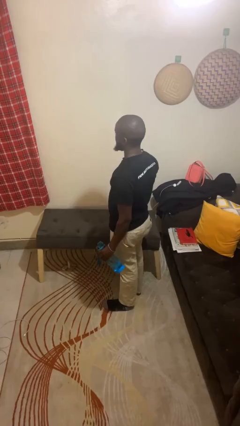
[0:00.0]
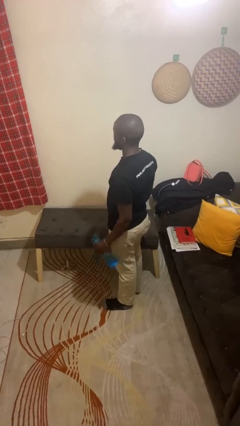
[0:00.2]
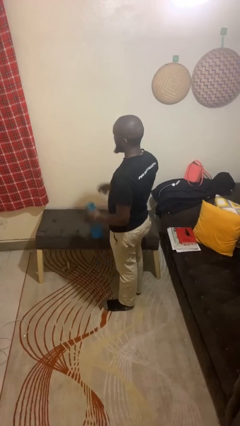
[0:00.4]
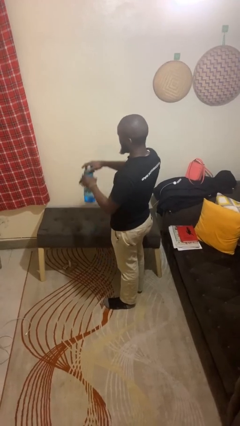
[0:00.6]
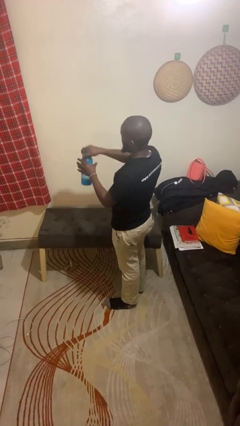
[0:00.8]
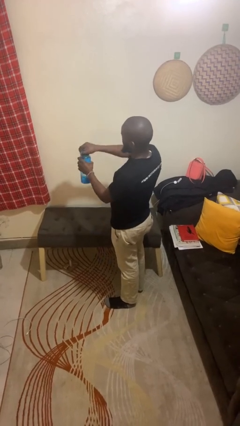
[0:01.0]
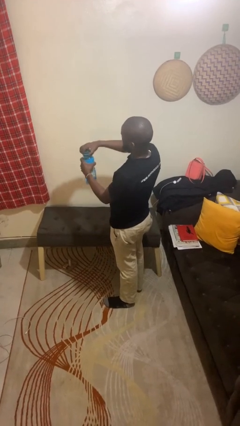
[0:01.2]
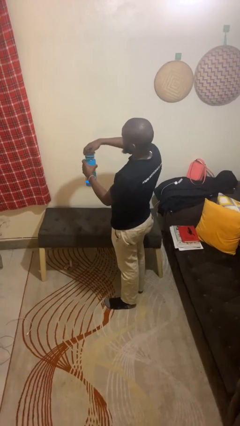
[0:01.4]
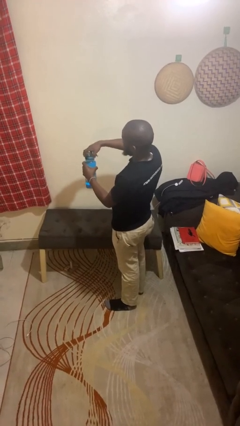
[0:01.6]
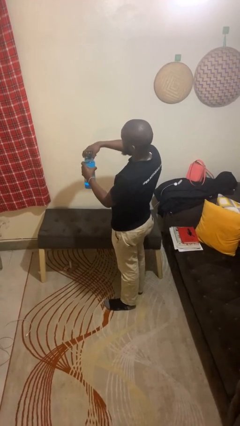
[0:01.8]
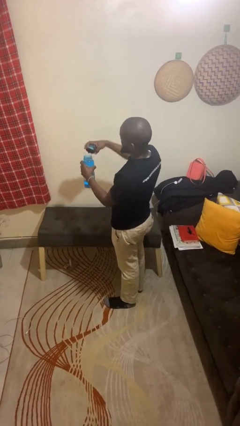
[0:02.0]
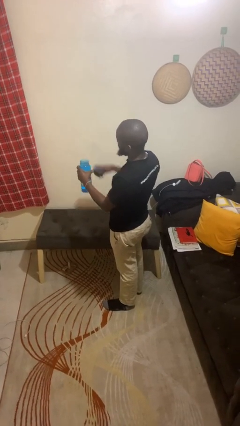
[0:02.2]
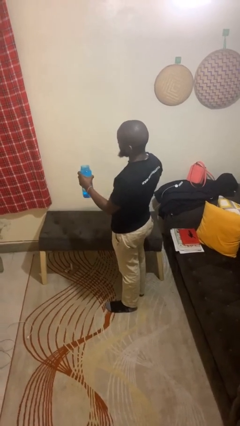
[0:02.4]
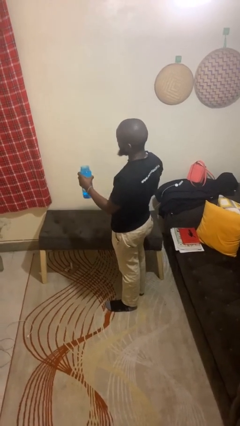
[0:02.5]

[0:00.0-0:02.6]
person opens jar

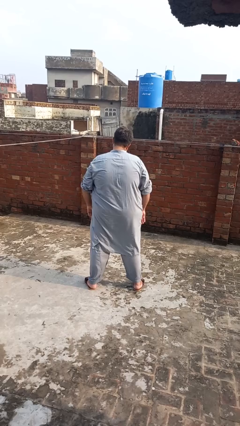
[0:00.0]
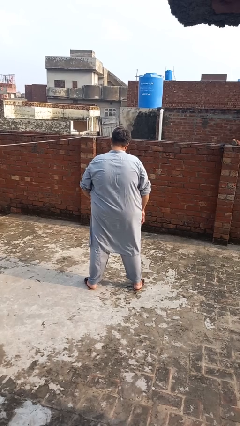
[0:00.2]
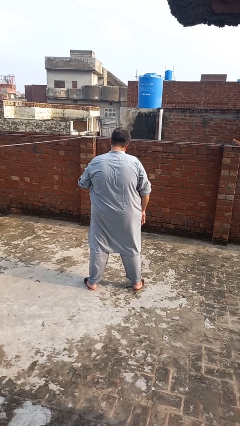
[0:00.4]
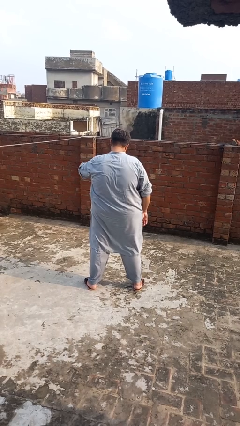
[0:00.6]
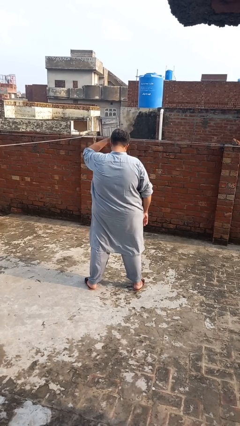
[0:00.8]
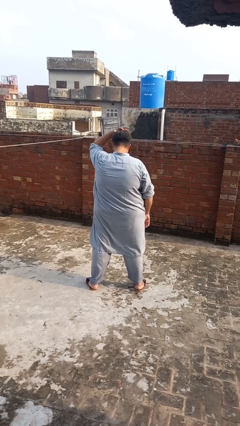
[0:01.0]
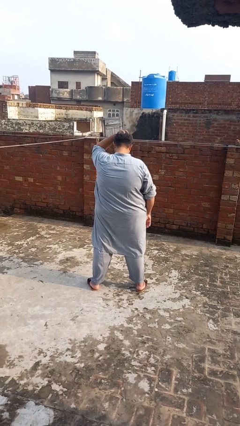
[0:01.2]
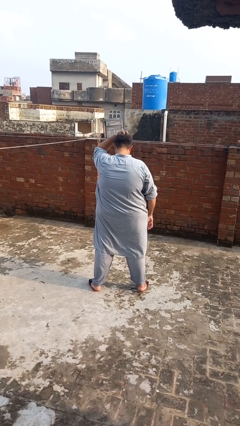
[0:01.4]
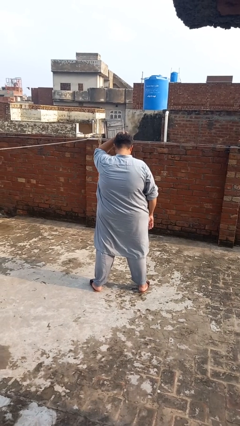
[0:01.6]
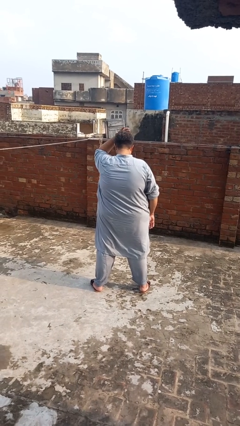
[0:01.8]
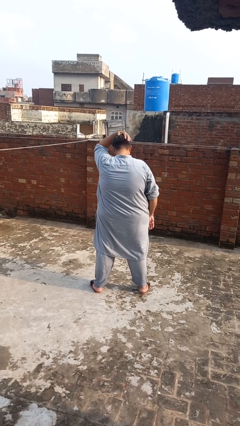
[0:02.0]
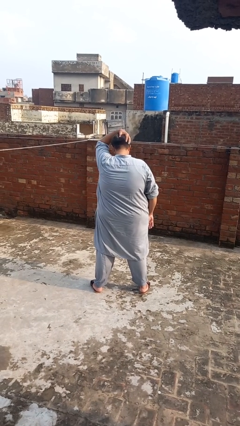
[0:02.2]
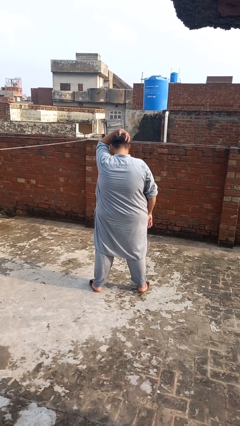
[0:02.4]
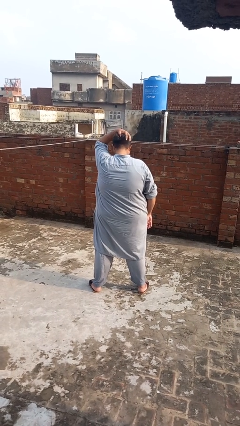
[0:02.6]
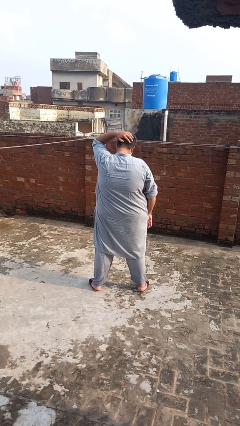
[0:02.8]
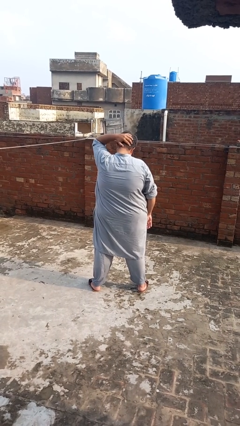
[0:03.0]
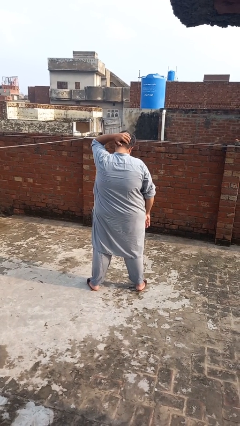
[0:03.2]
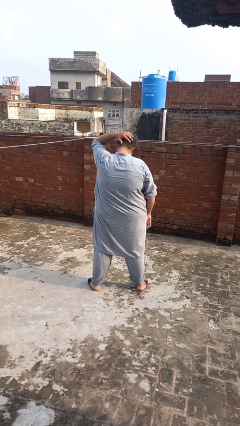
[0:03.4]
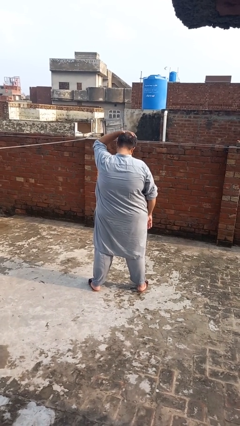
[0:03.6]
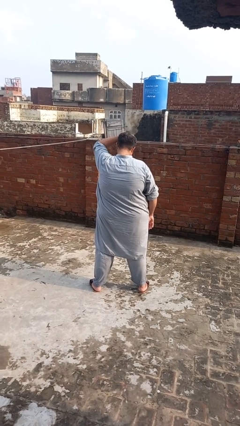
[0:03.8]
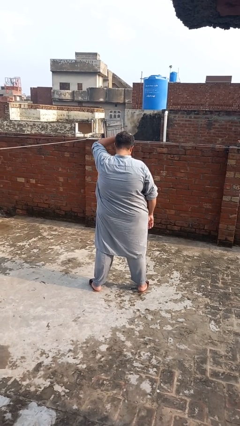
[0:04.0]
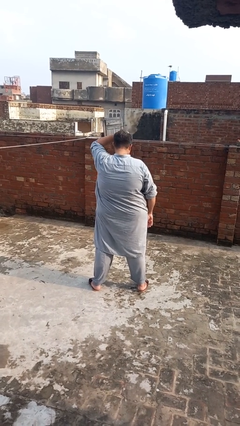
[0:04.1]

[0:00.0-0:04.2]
person pats head

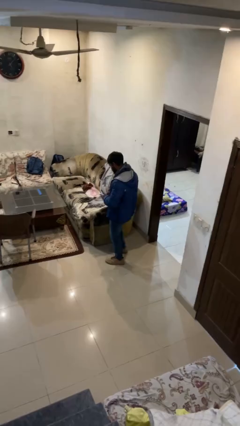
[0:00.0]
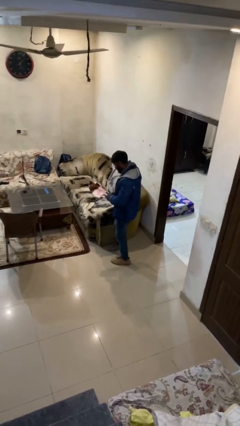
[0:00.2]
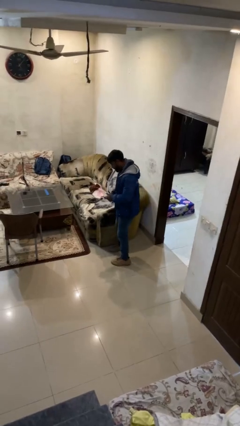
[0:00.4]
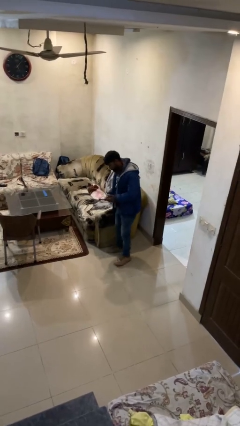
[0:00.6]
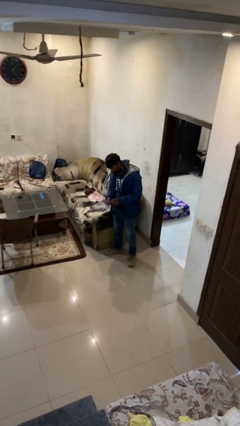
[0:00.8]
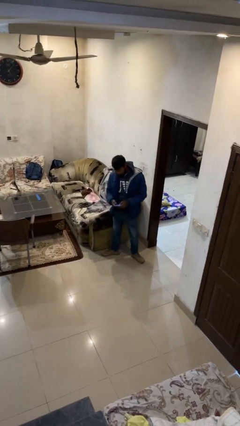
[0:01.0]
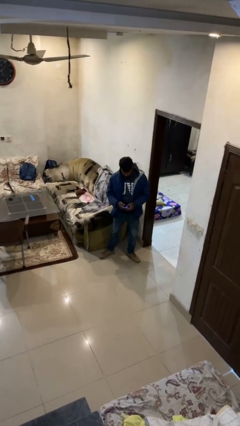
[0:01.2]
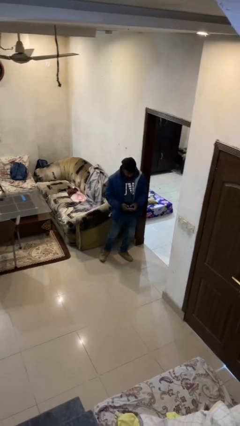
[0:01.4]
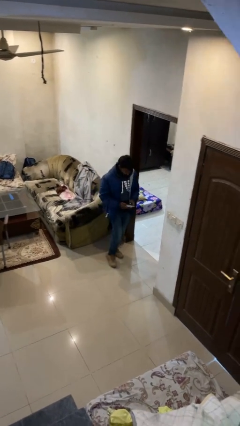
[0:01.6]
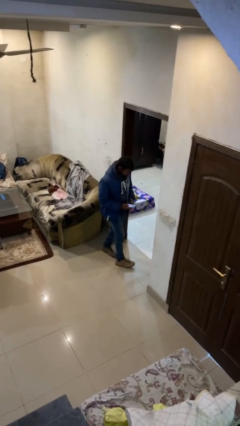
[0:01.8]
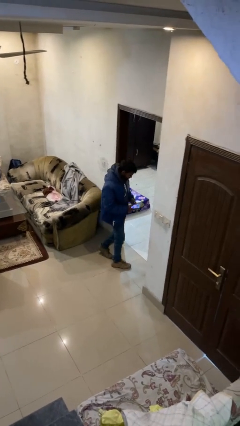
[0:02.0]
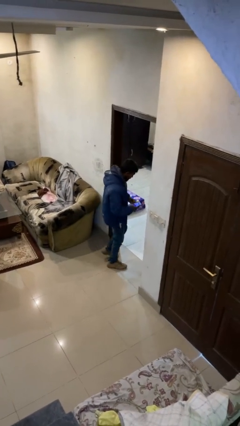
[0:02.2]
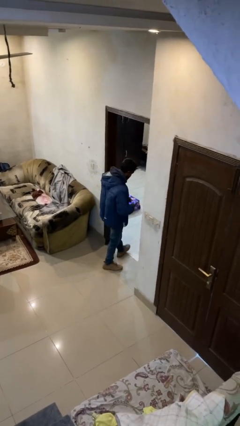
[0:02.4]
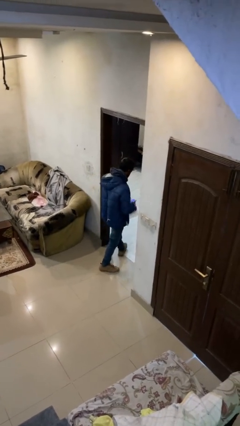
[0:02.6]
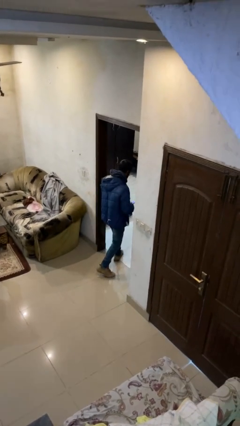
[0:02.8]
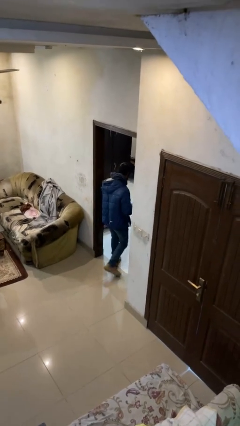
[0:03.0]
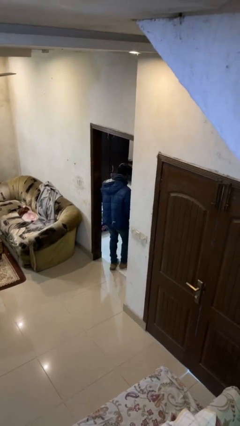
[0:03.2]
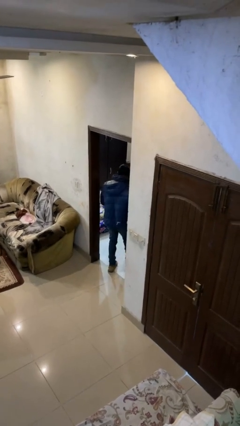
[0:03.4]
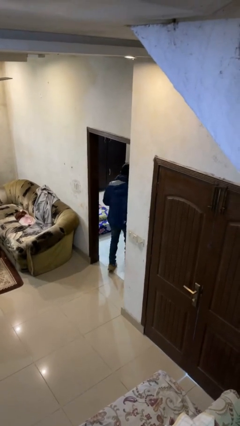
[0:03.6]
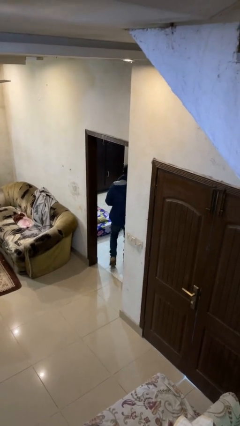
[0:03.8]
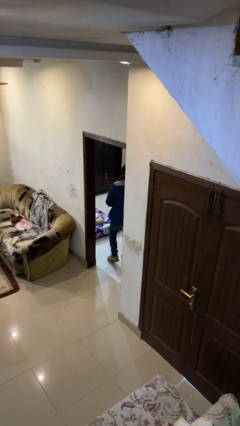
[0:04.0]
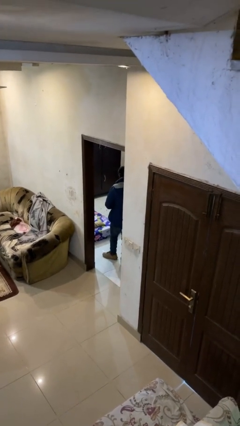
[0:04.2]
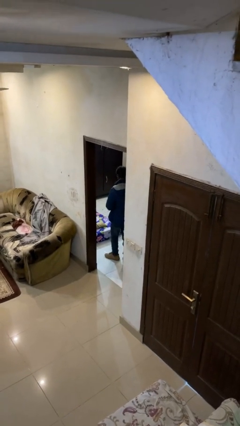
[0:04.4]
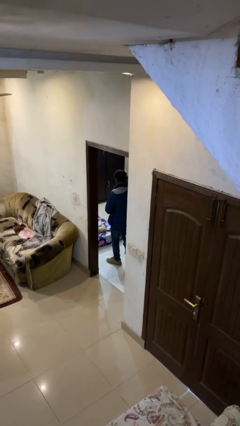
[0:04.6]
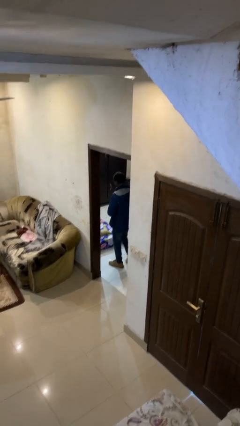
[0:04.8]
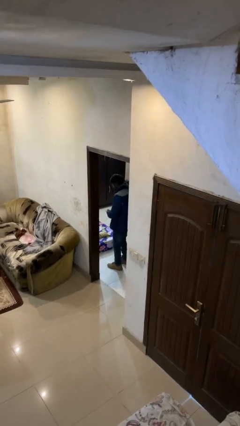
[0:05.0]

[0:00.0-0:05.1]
person exits scene through structure

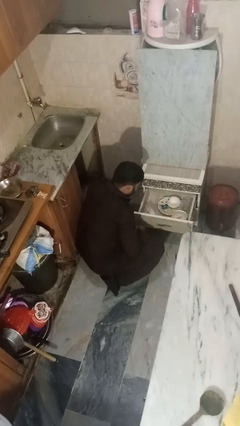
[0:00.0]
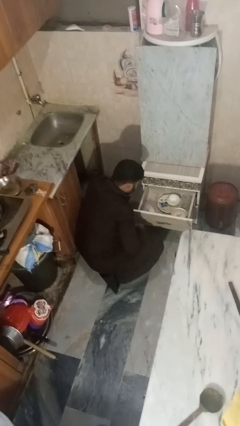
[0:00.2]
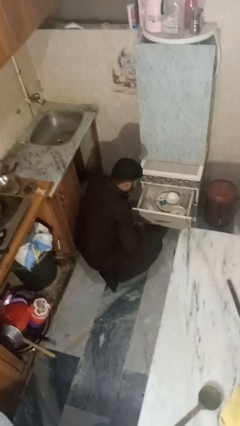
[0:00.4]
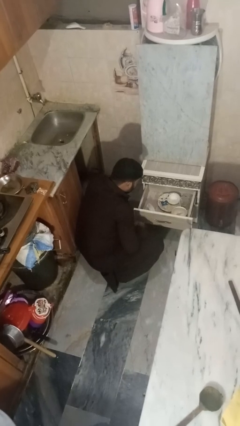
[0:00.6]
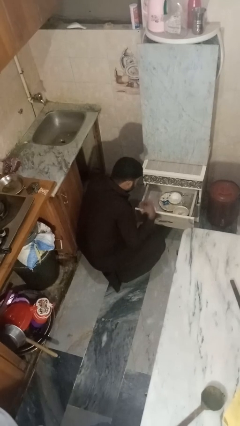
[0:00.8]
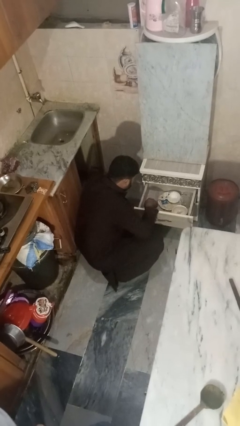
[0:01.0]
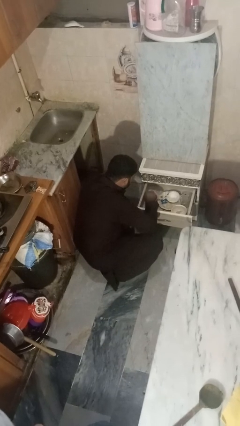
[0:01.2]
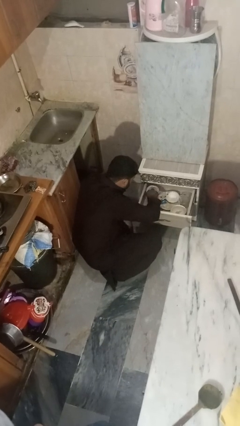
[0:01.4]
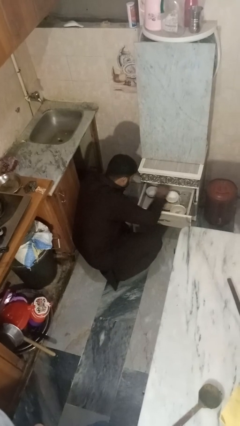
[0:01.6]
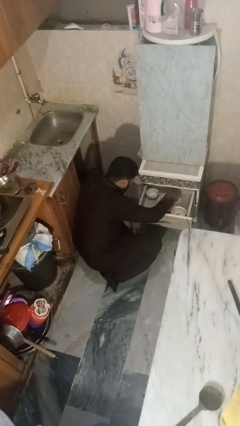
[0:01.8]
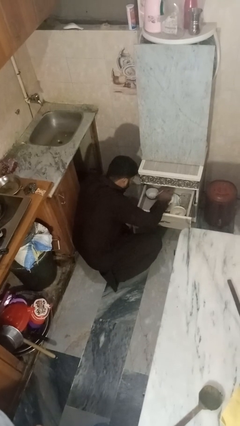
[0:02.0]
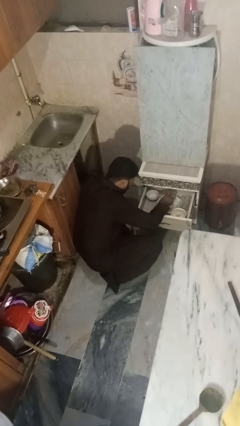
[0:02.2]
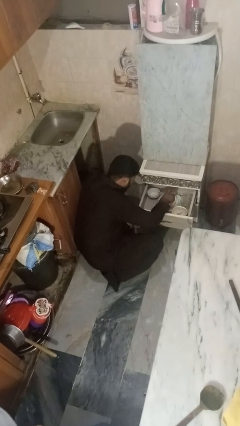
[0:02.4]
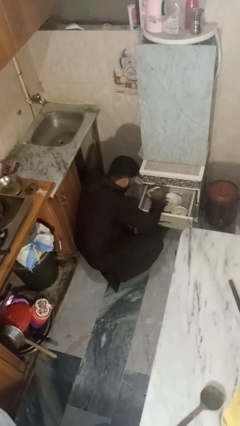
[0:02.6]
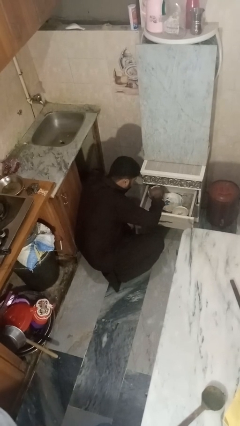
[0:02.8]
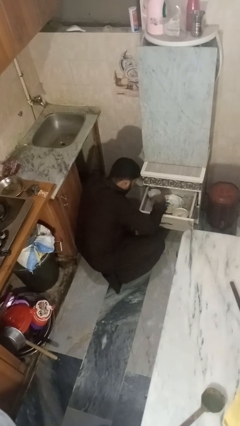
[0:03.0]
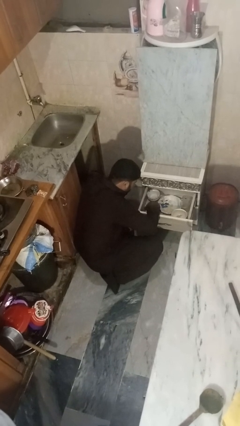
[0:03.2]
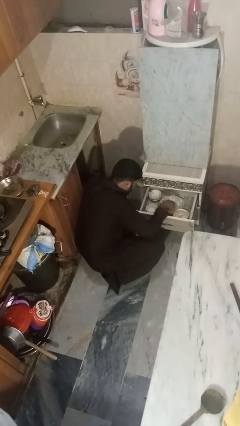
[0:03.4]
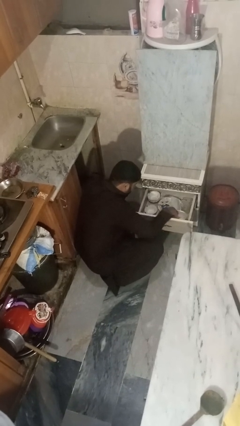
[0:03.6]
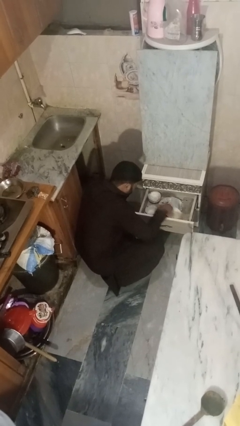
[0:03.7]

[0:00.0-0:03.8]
person searches in kitchen drawer

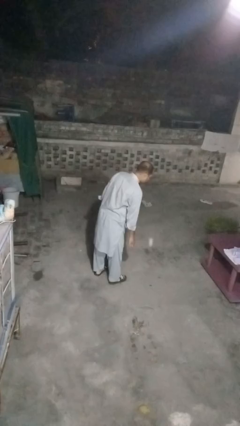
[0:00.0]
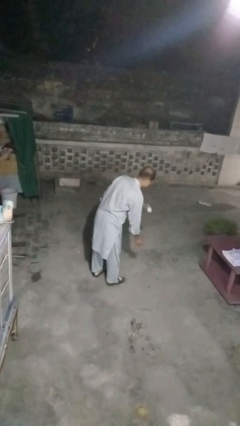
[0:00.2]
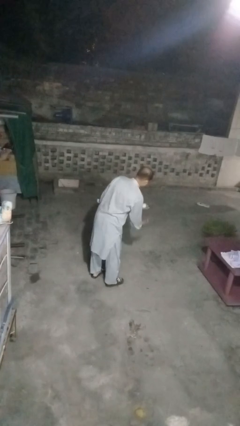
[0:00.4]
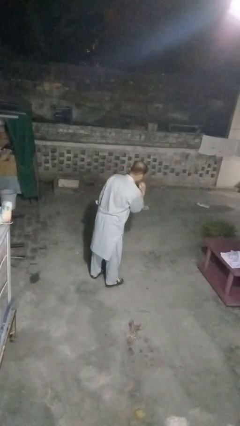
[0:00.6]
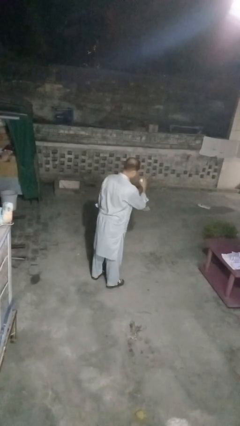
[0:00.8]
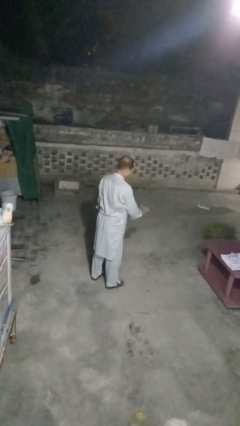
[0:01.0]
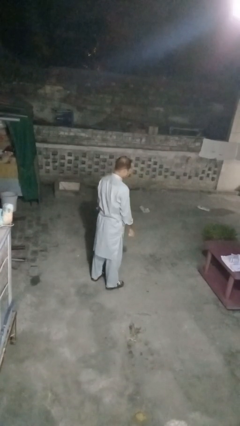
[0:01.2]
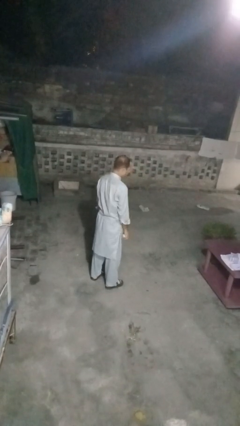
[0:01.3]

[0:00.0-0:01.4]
person bounces ball on floor

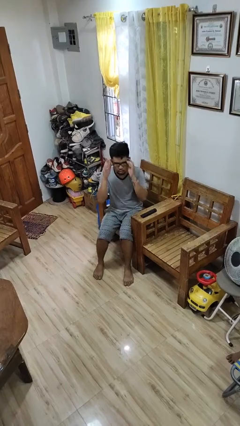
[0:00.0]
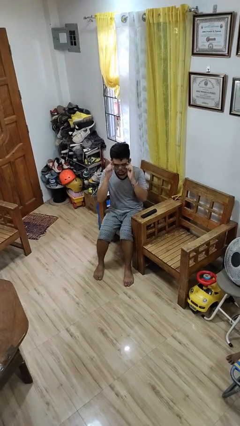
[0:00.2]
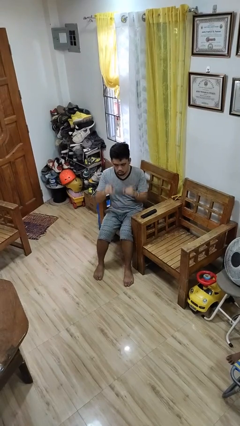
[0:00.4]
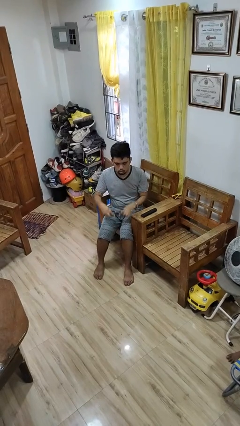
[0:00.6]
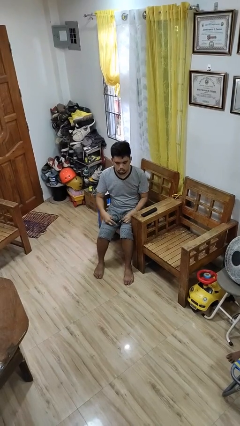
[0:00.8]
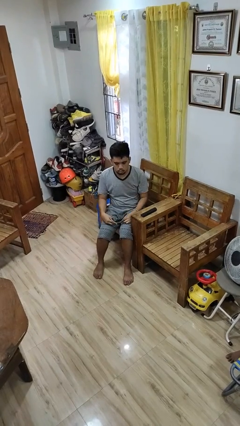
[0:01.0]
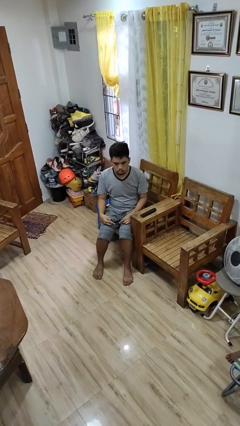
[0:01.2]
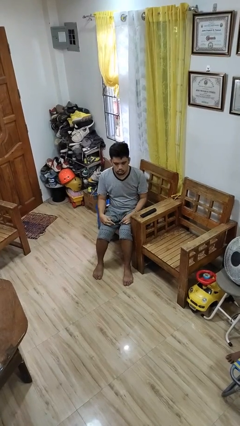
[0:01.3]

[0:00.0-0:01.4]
person takes off glasses
